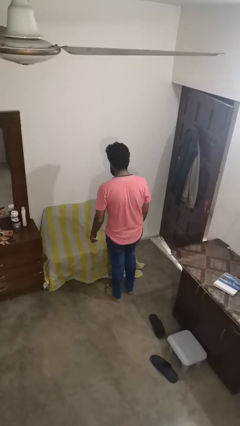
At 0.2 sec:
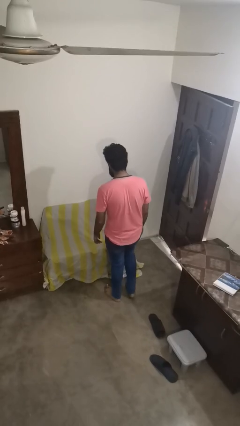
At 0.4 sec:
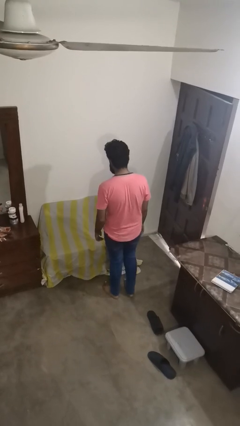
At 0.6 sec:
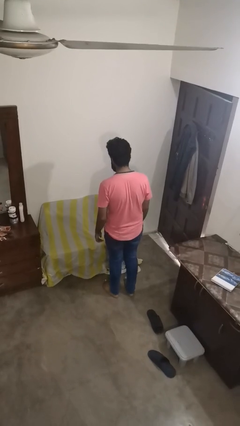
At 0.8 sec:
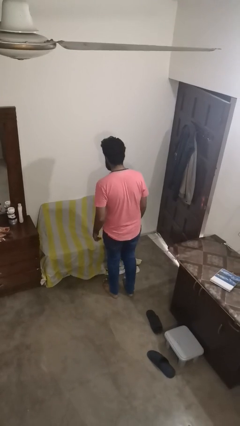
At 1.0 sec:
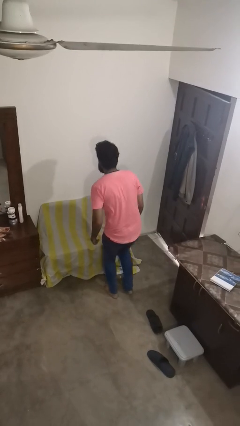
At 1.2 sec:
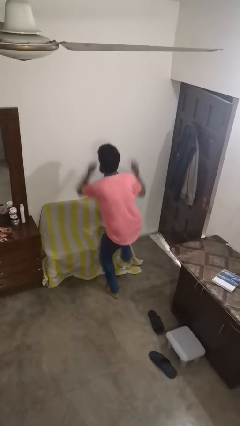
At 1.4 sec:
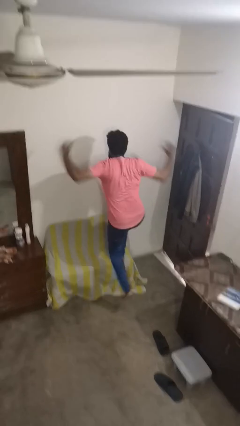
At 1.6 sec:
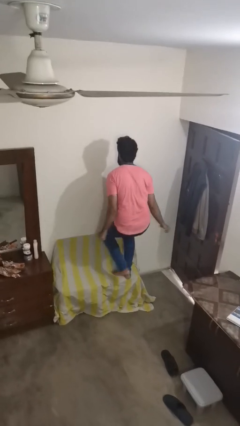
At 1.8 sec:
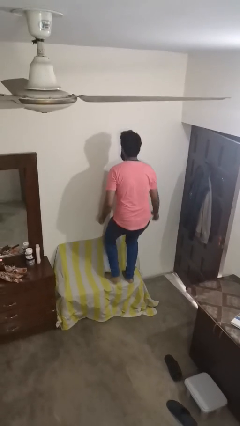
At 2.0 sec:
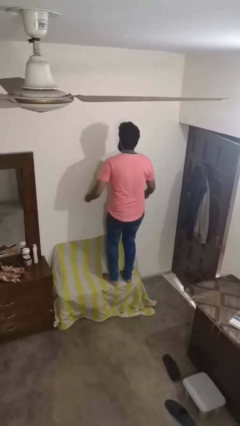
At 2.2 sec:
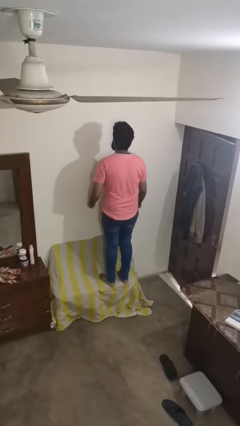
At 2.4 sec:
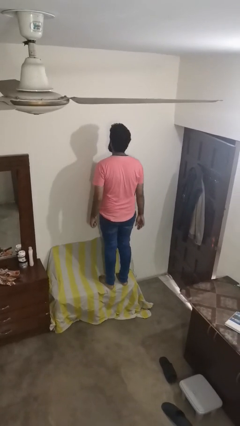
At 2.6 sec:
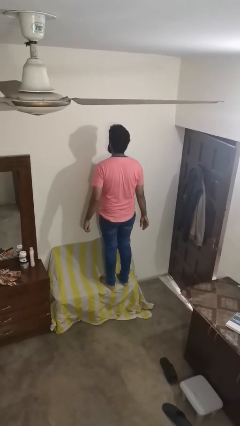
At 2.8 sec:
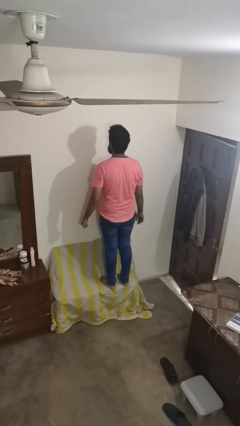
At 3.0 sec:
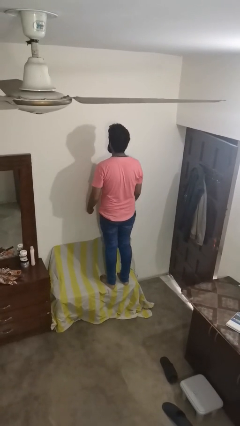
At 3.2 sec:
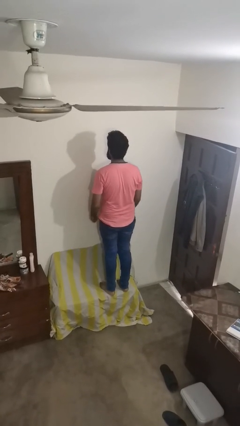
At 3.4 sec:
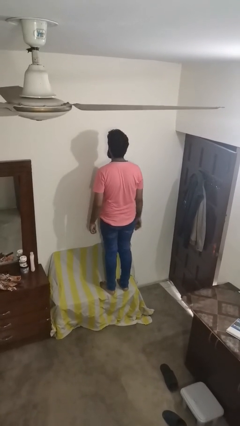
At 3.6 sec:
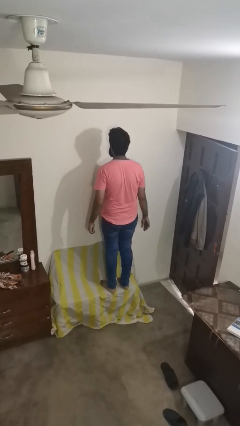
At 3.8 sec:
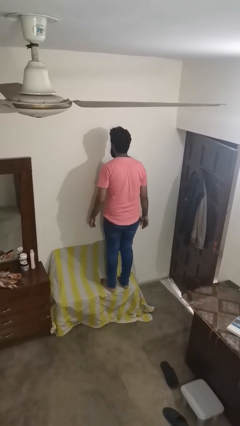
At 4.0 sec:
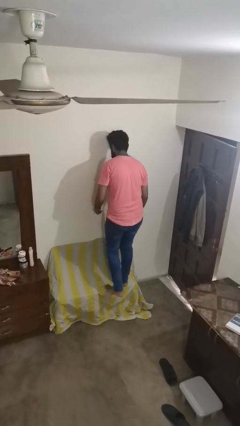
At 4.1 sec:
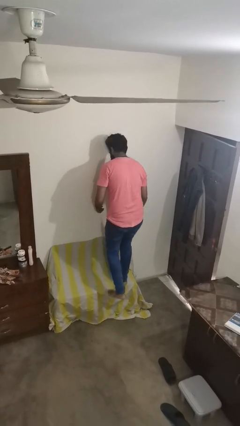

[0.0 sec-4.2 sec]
person jumps on couch

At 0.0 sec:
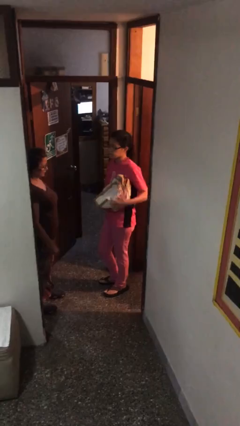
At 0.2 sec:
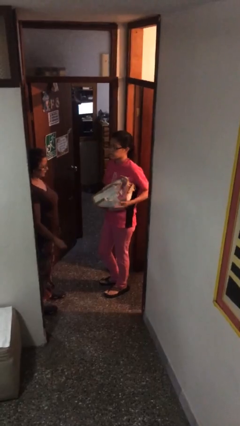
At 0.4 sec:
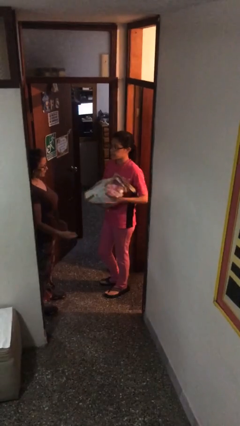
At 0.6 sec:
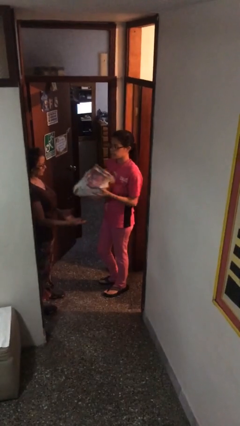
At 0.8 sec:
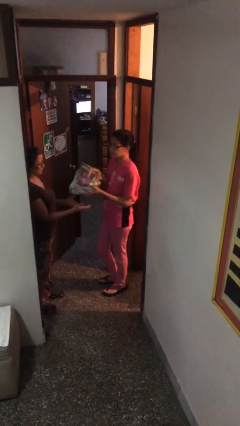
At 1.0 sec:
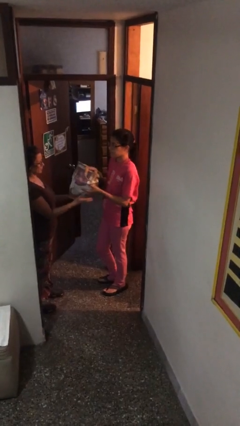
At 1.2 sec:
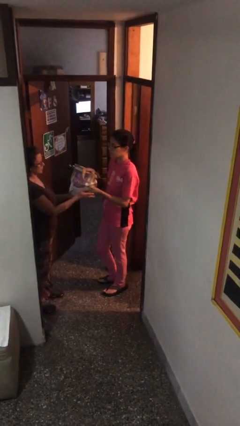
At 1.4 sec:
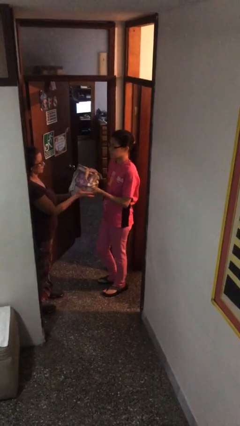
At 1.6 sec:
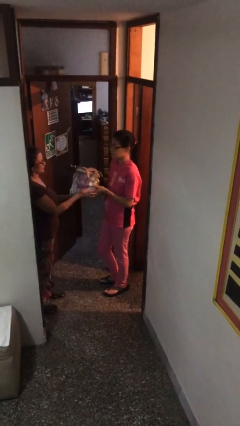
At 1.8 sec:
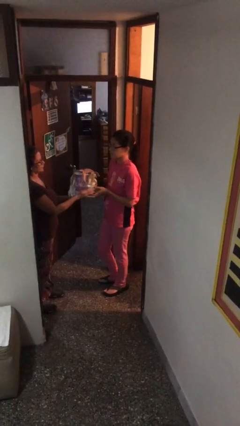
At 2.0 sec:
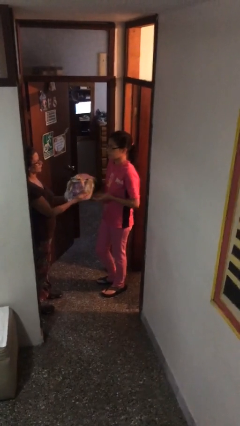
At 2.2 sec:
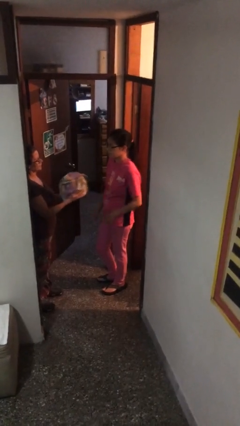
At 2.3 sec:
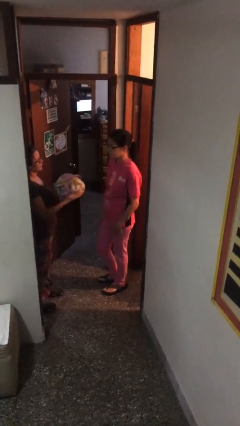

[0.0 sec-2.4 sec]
person transfers object to person

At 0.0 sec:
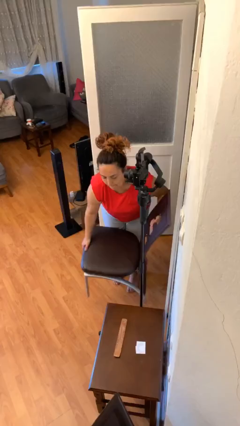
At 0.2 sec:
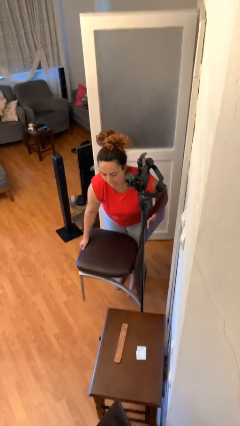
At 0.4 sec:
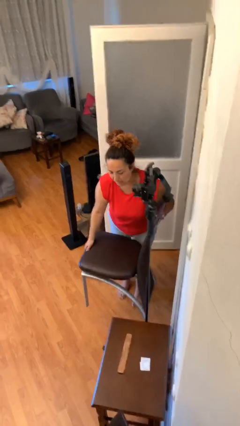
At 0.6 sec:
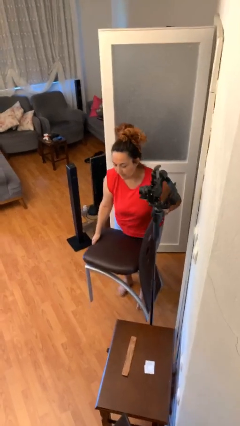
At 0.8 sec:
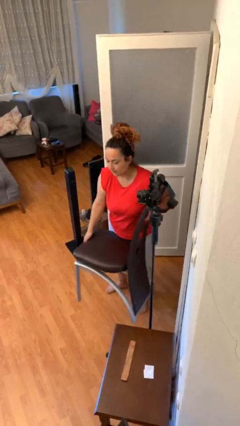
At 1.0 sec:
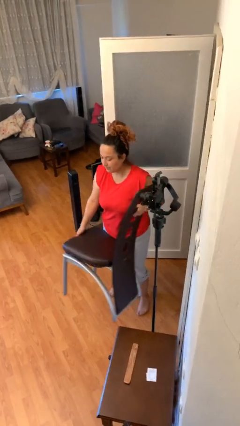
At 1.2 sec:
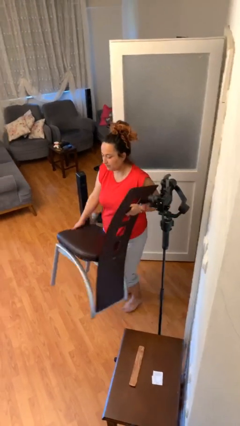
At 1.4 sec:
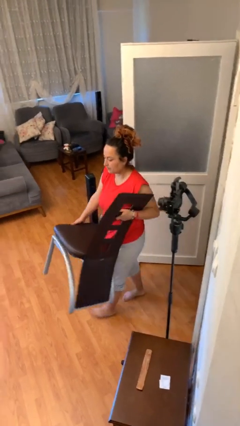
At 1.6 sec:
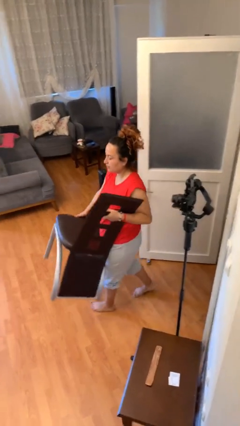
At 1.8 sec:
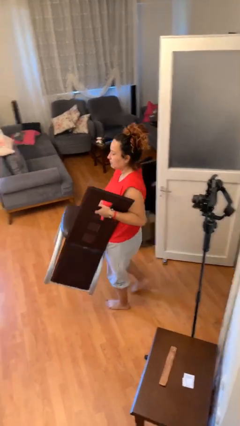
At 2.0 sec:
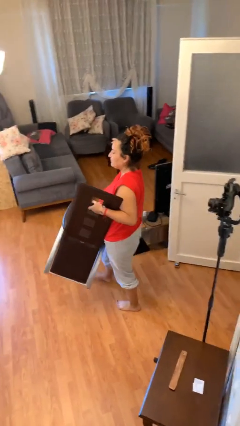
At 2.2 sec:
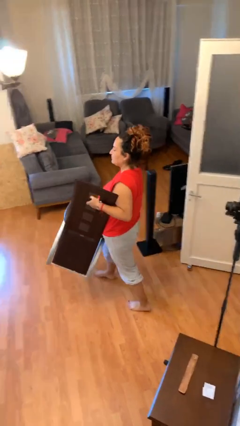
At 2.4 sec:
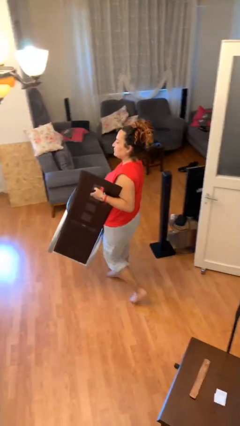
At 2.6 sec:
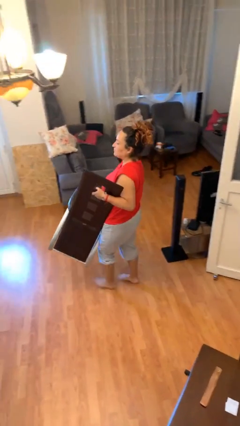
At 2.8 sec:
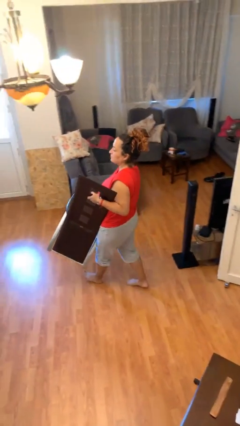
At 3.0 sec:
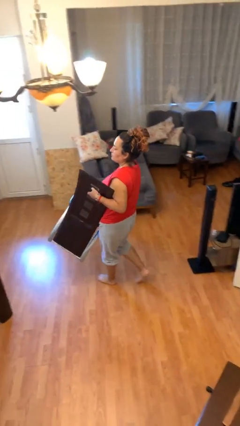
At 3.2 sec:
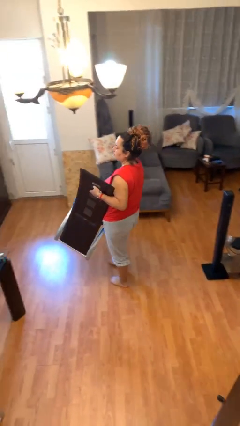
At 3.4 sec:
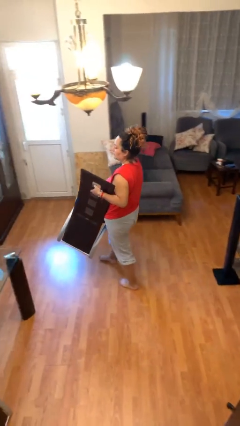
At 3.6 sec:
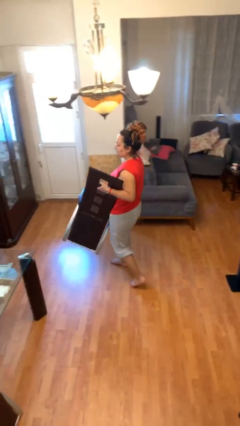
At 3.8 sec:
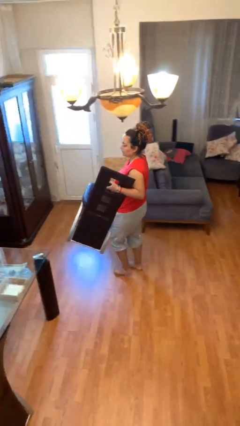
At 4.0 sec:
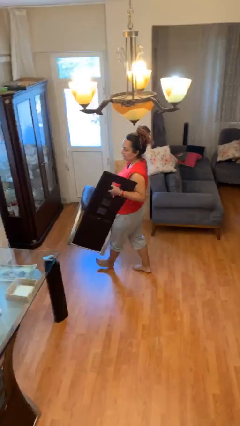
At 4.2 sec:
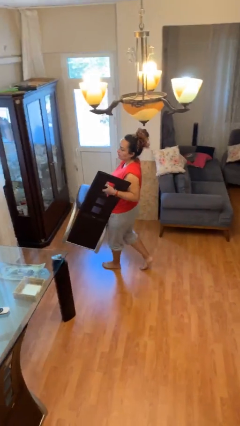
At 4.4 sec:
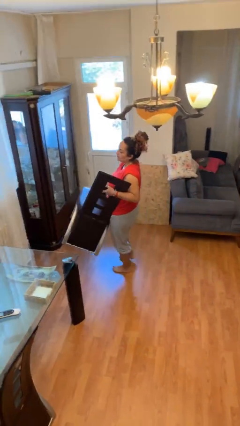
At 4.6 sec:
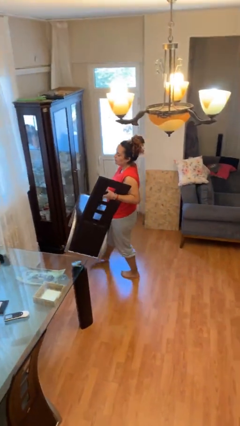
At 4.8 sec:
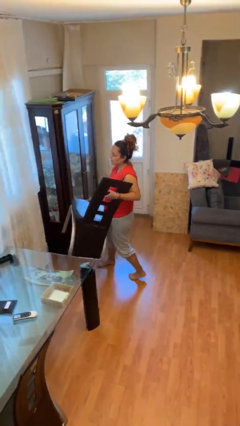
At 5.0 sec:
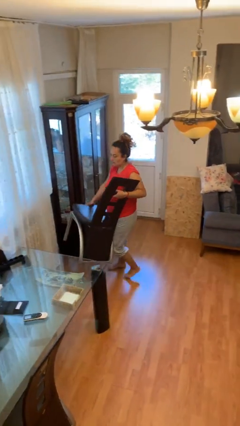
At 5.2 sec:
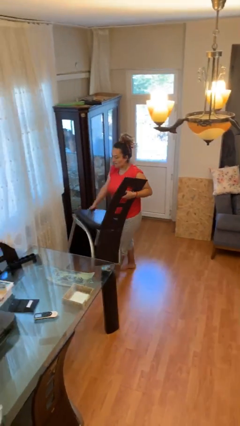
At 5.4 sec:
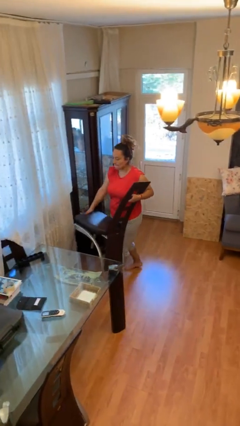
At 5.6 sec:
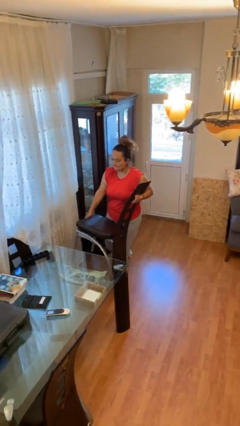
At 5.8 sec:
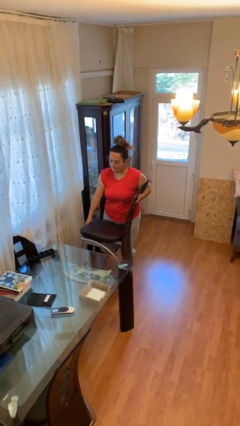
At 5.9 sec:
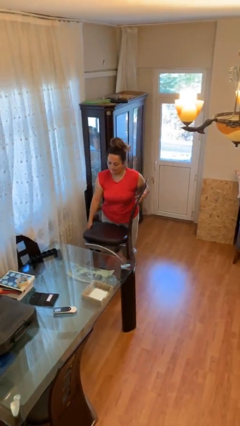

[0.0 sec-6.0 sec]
person carries heavy object

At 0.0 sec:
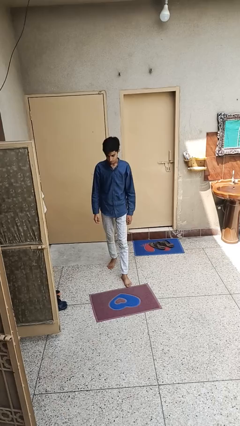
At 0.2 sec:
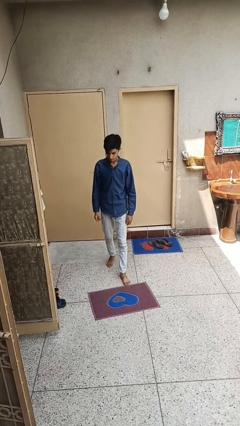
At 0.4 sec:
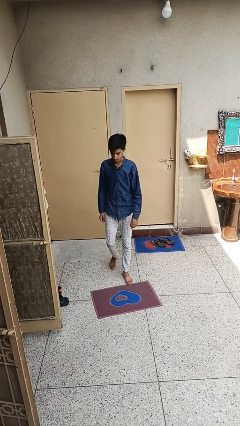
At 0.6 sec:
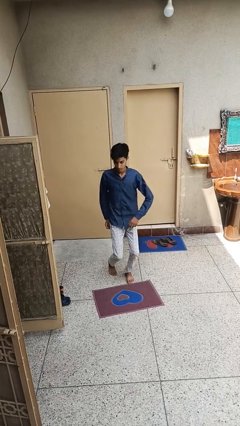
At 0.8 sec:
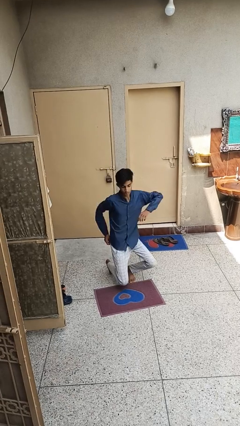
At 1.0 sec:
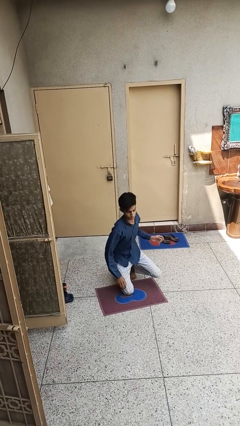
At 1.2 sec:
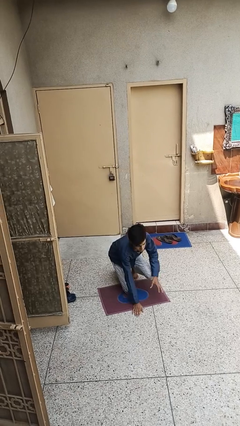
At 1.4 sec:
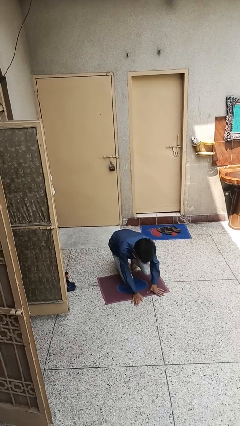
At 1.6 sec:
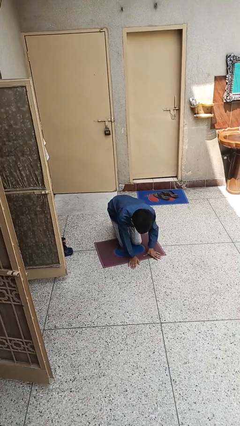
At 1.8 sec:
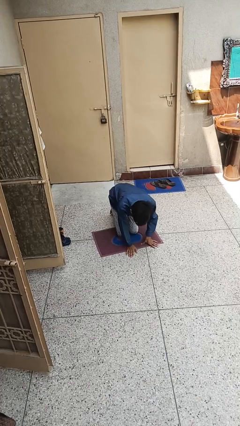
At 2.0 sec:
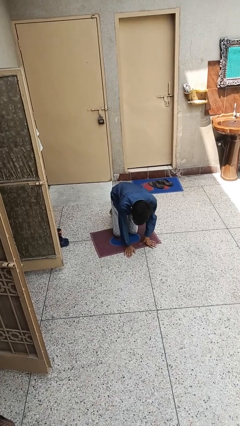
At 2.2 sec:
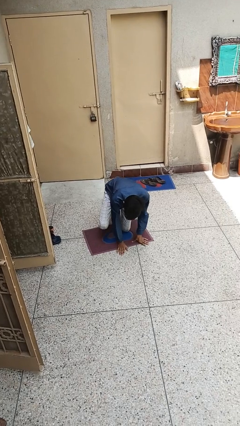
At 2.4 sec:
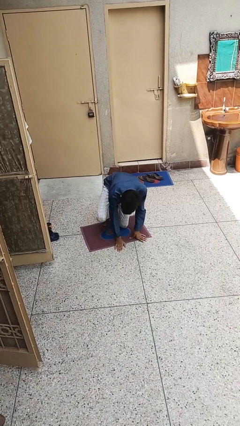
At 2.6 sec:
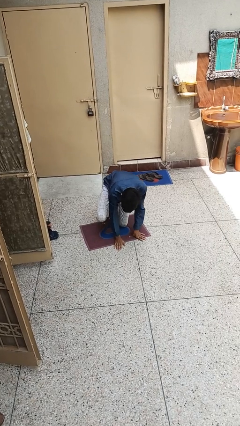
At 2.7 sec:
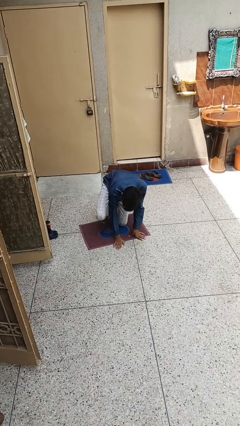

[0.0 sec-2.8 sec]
person trips on object on floor

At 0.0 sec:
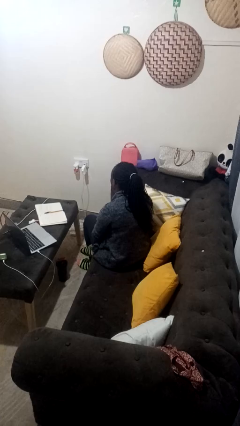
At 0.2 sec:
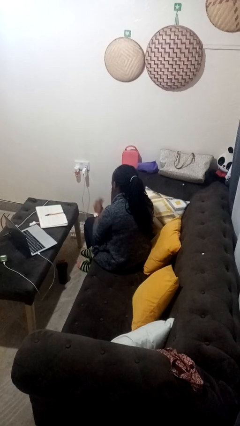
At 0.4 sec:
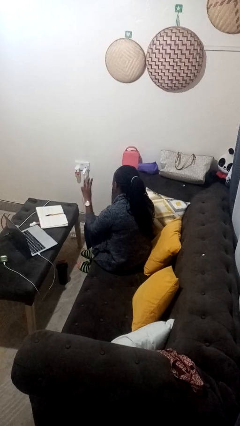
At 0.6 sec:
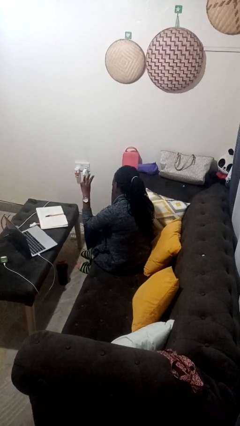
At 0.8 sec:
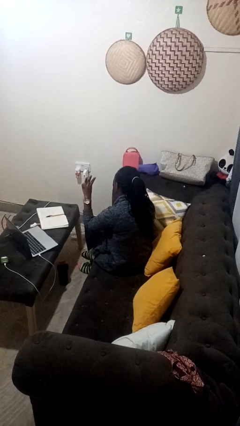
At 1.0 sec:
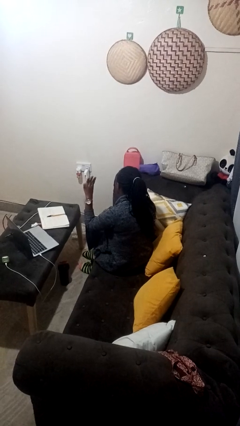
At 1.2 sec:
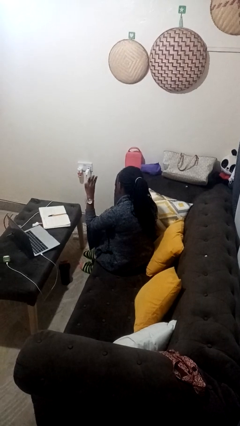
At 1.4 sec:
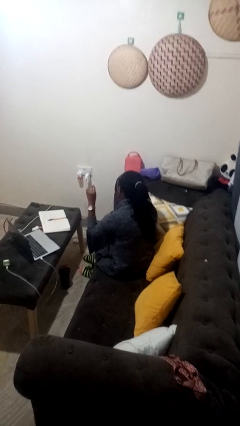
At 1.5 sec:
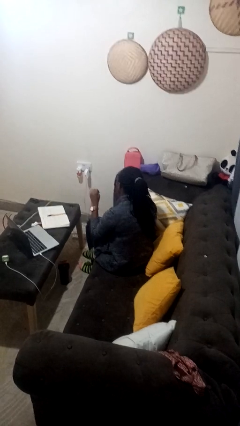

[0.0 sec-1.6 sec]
person gestures number three

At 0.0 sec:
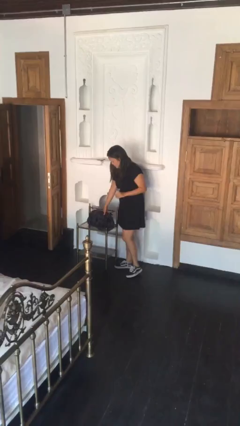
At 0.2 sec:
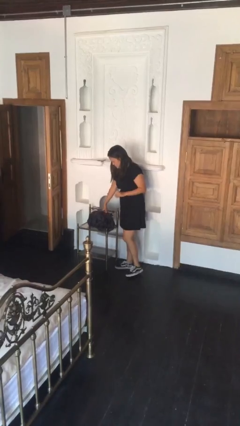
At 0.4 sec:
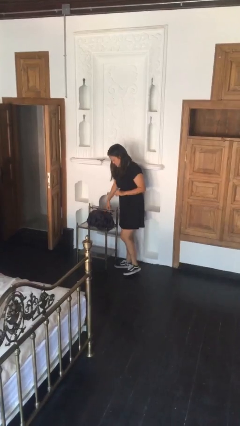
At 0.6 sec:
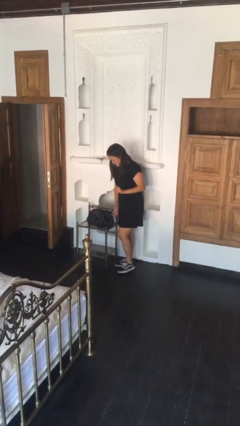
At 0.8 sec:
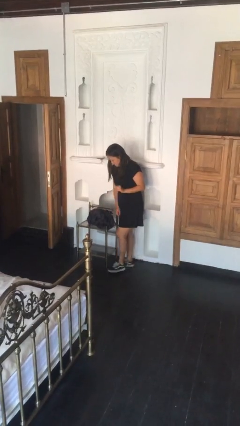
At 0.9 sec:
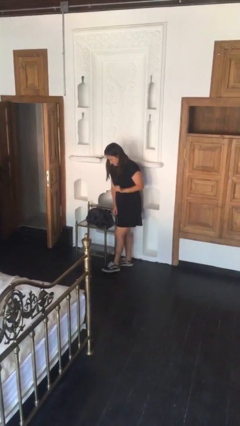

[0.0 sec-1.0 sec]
person puts down object on table
